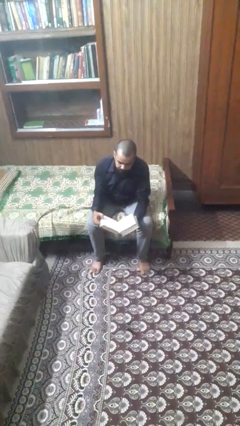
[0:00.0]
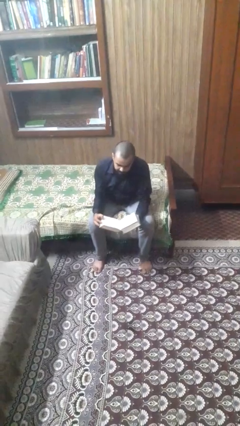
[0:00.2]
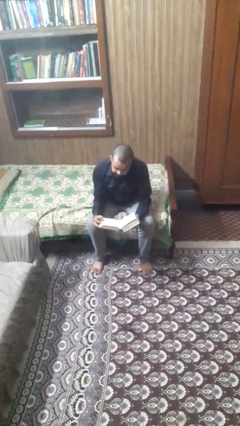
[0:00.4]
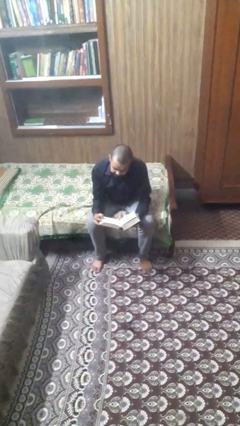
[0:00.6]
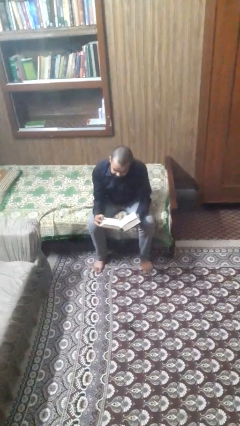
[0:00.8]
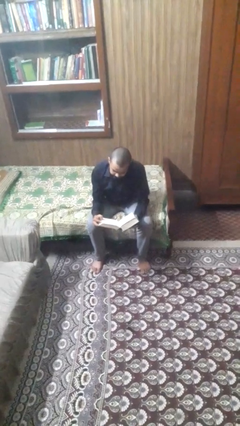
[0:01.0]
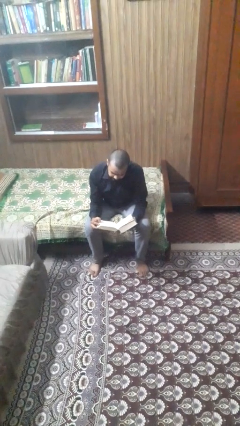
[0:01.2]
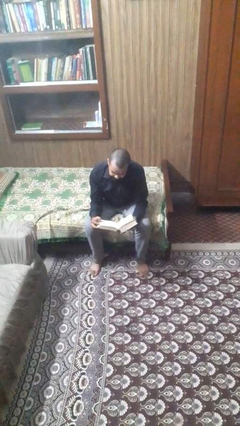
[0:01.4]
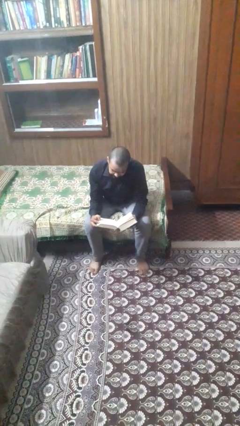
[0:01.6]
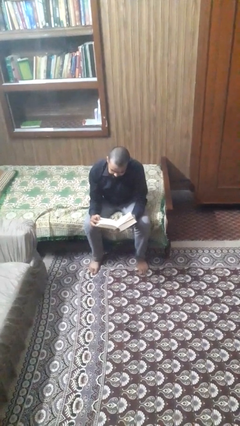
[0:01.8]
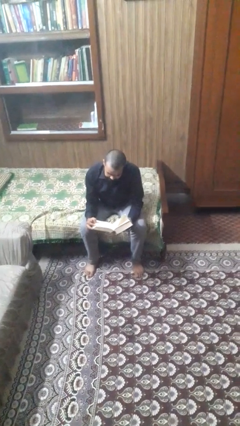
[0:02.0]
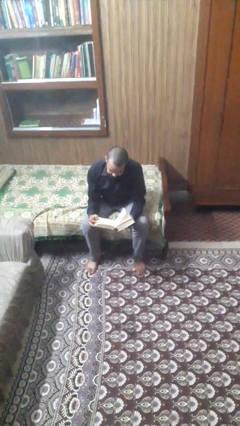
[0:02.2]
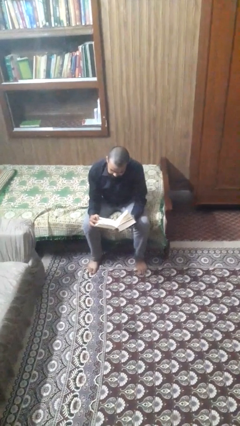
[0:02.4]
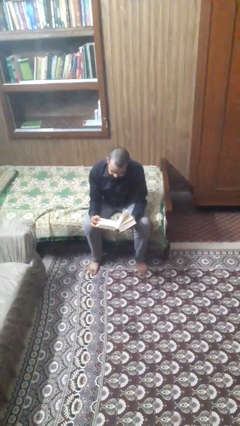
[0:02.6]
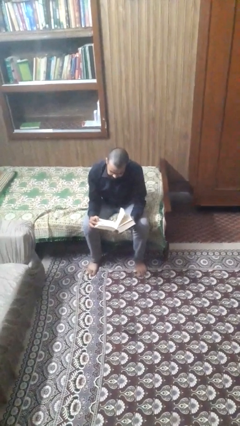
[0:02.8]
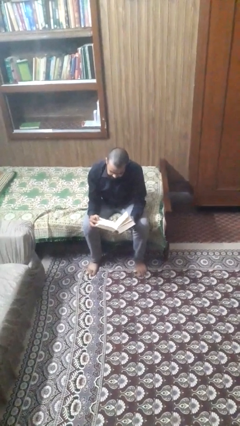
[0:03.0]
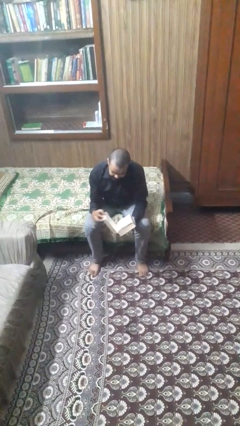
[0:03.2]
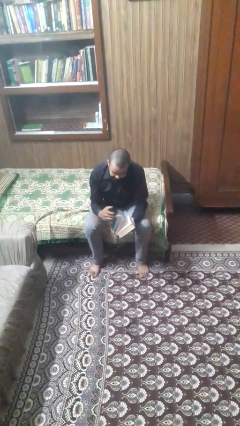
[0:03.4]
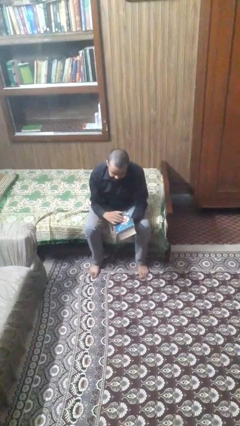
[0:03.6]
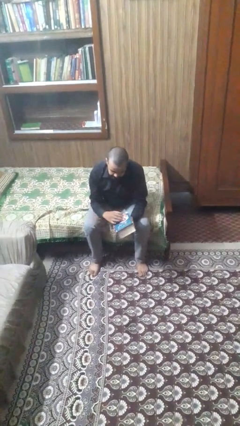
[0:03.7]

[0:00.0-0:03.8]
person reads book

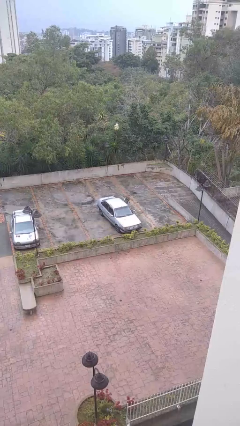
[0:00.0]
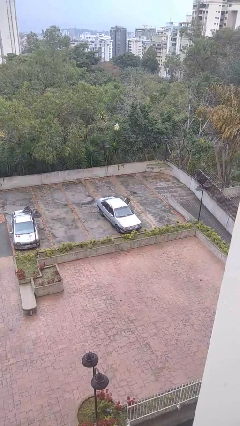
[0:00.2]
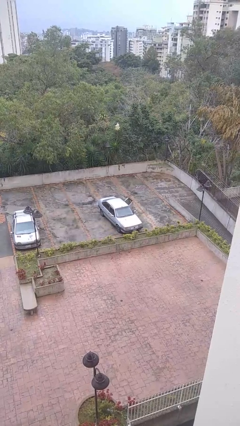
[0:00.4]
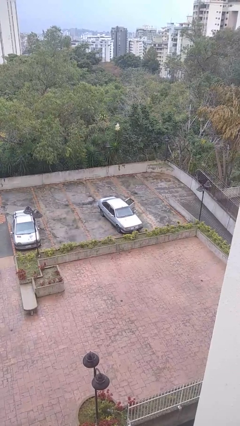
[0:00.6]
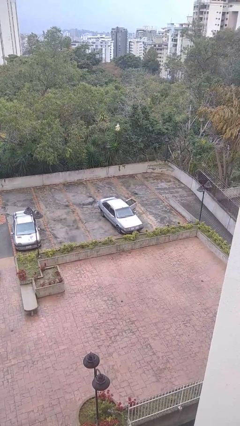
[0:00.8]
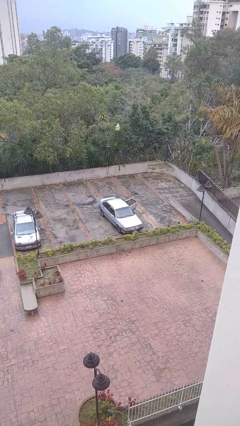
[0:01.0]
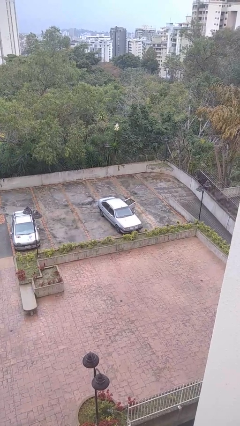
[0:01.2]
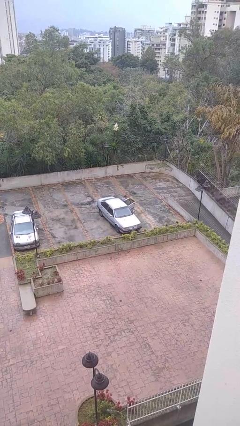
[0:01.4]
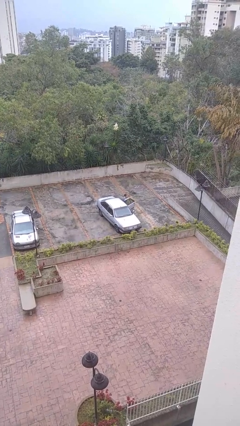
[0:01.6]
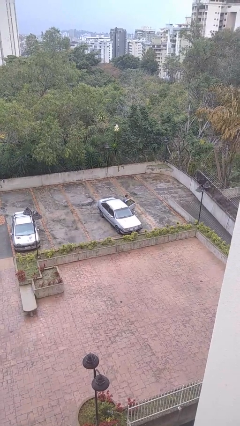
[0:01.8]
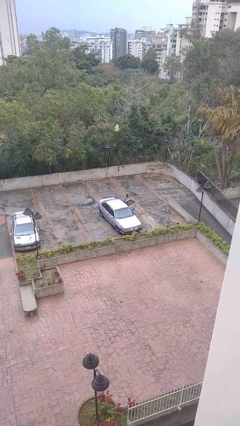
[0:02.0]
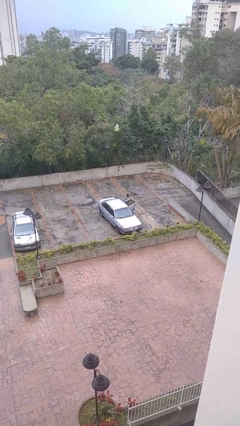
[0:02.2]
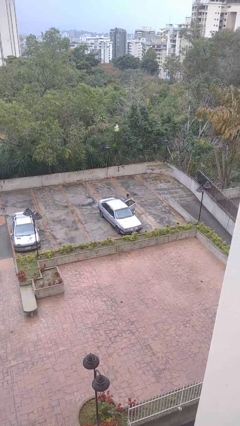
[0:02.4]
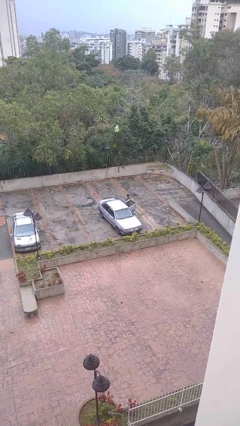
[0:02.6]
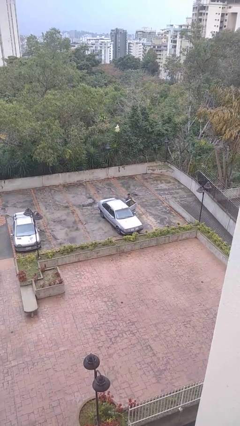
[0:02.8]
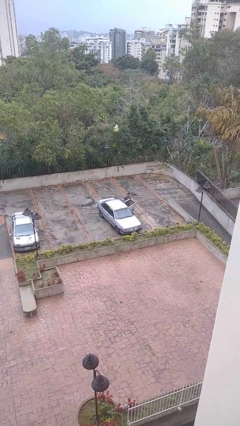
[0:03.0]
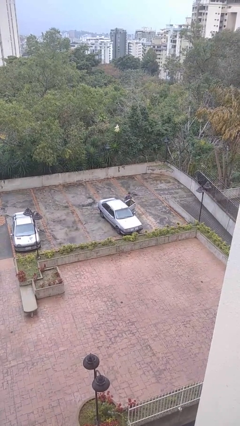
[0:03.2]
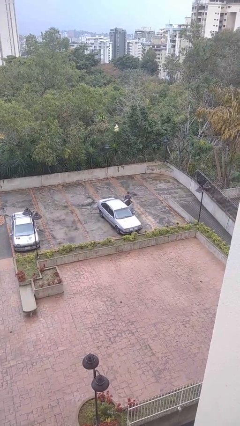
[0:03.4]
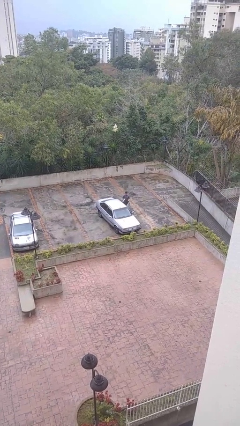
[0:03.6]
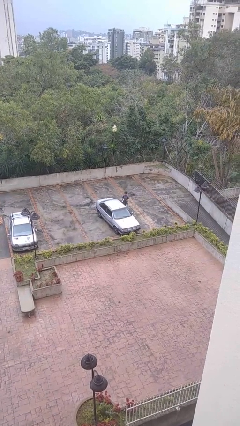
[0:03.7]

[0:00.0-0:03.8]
car drops off person

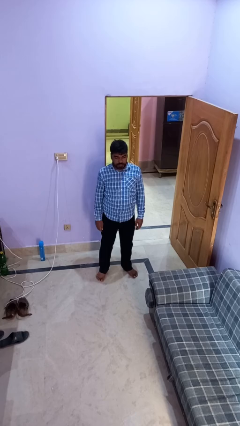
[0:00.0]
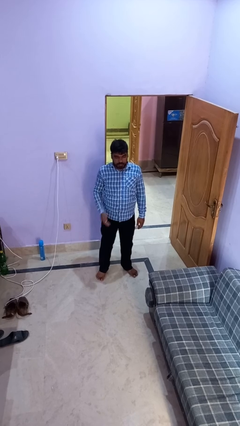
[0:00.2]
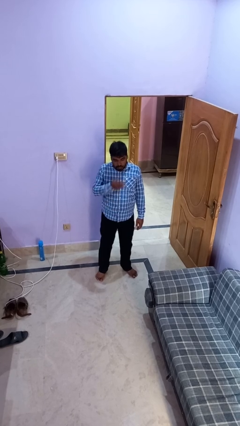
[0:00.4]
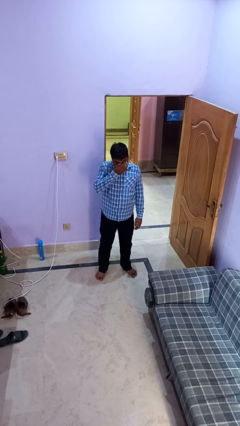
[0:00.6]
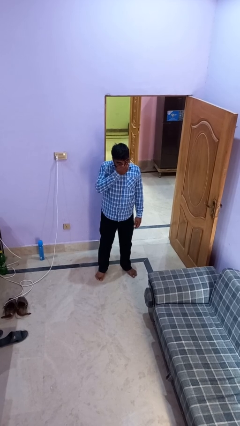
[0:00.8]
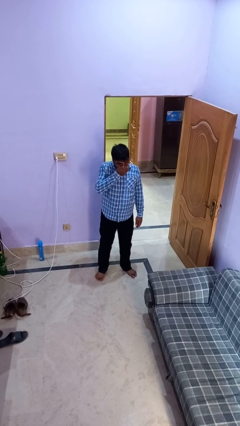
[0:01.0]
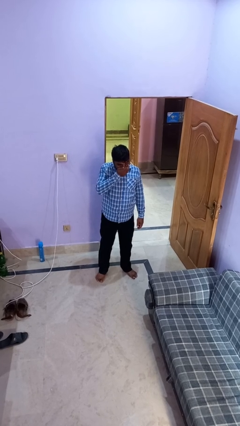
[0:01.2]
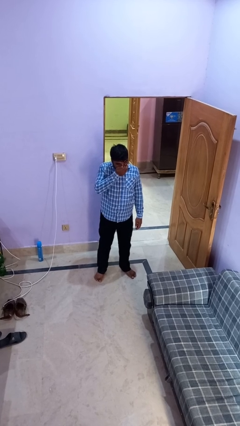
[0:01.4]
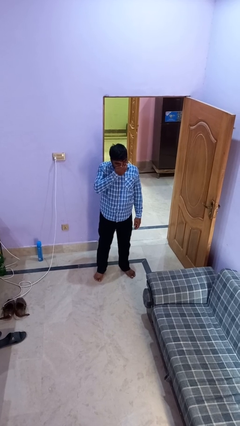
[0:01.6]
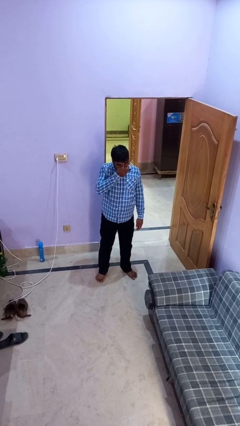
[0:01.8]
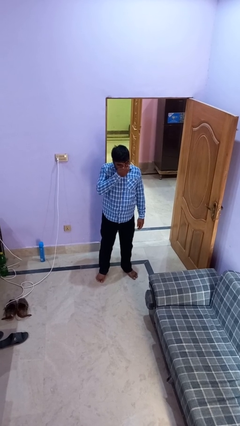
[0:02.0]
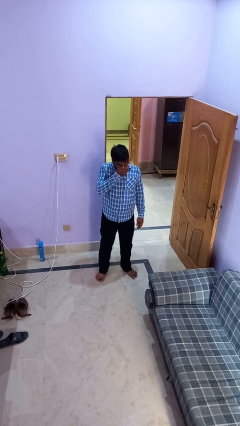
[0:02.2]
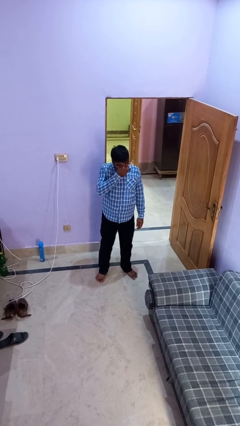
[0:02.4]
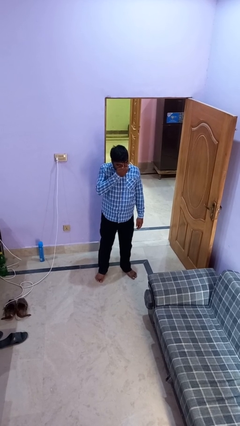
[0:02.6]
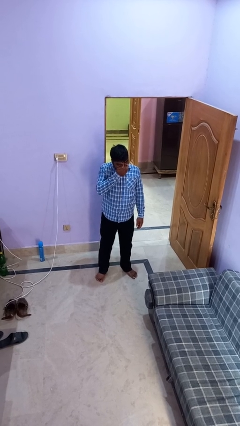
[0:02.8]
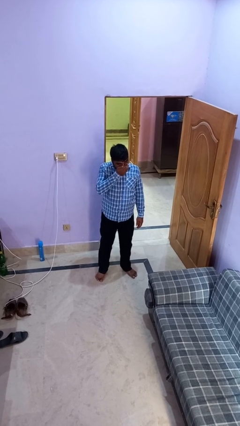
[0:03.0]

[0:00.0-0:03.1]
person sneezes into hand

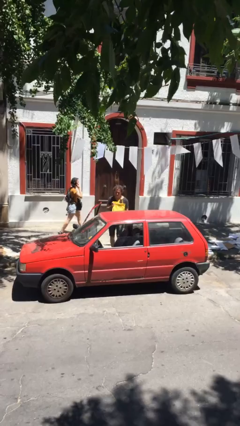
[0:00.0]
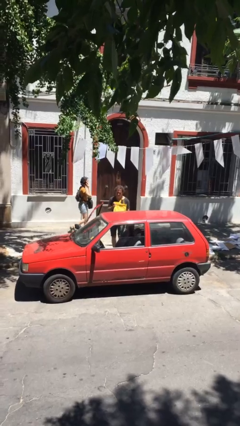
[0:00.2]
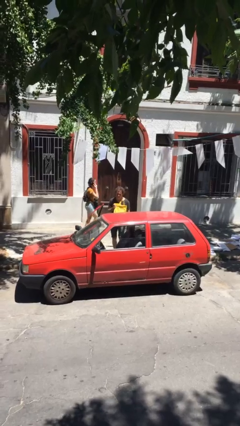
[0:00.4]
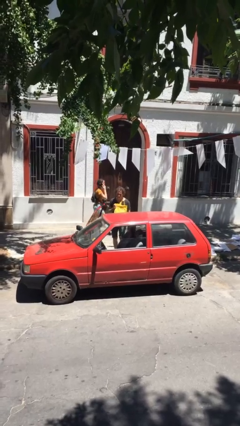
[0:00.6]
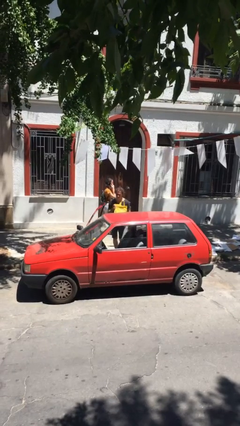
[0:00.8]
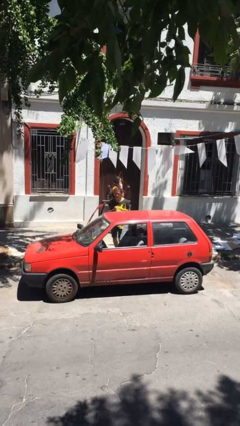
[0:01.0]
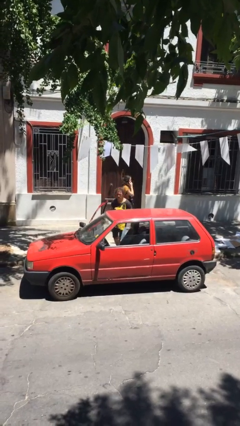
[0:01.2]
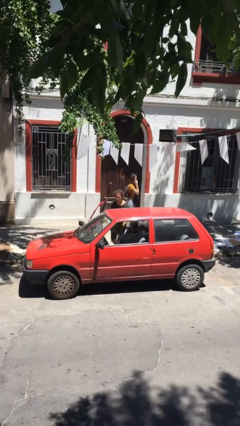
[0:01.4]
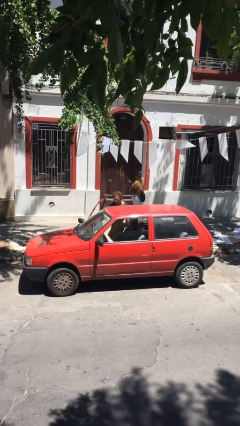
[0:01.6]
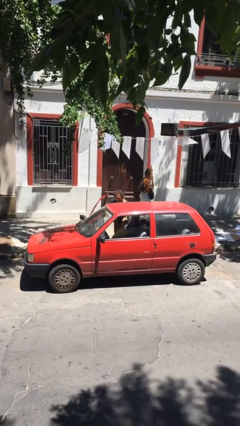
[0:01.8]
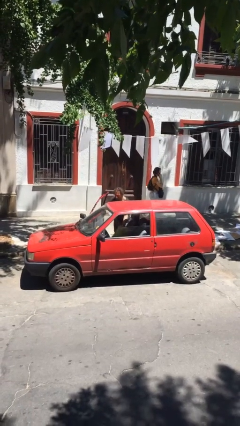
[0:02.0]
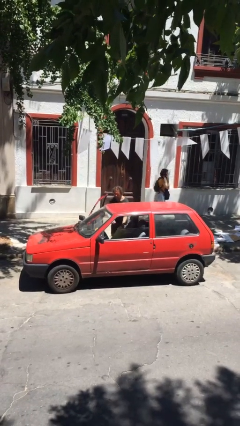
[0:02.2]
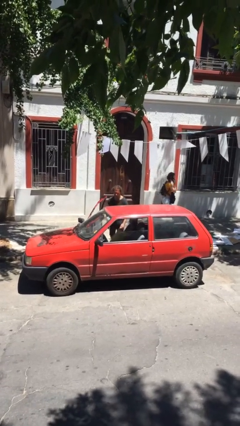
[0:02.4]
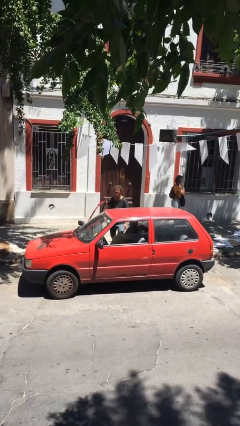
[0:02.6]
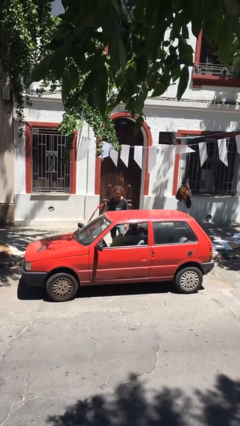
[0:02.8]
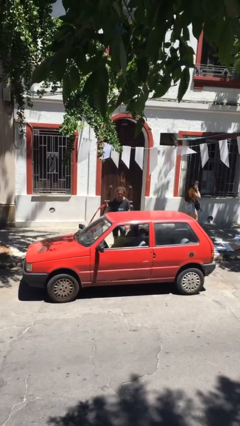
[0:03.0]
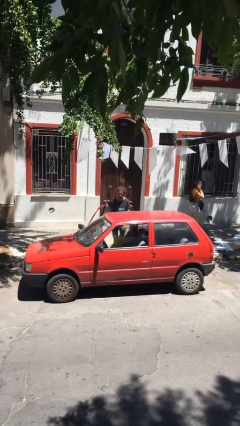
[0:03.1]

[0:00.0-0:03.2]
person loads car

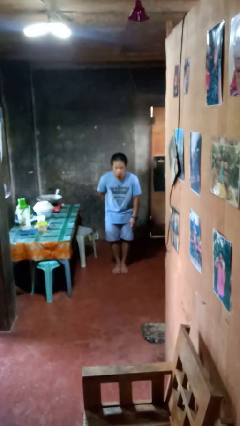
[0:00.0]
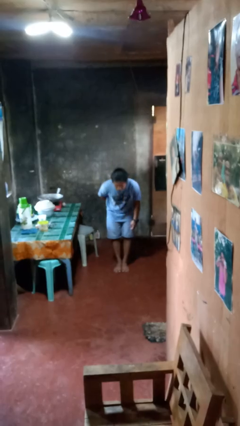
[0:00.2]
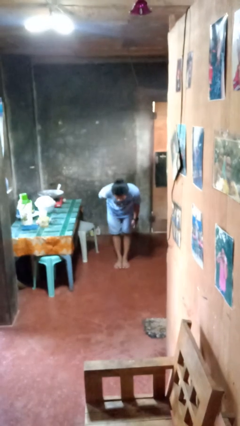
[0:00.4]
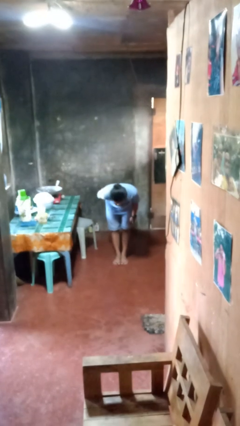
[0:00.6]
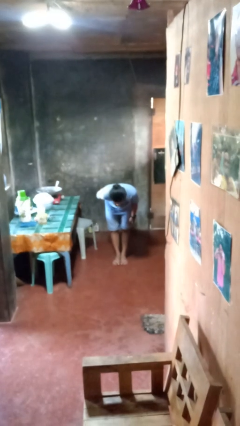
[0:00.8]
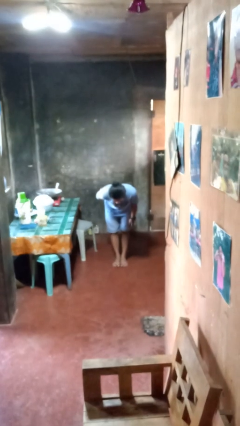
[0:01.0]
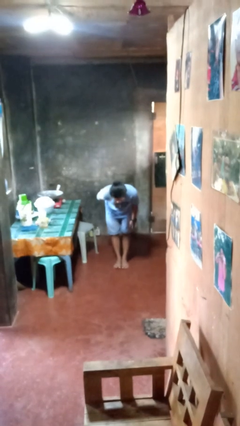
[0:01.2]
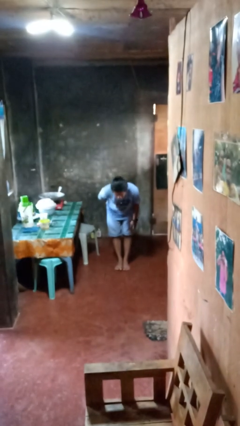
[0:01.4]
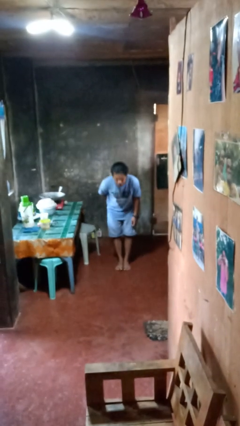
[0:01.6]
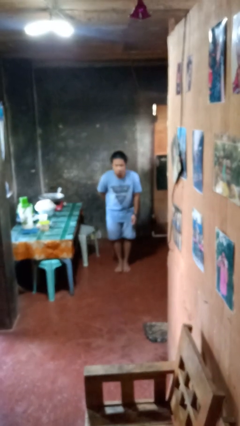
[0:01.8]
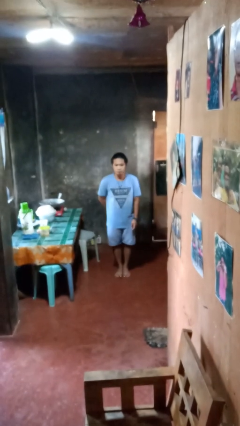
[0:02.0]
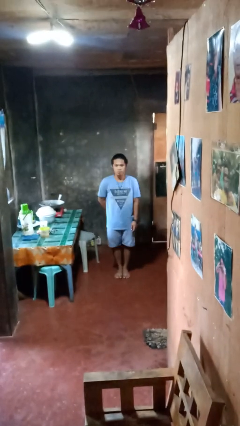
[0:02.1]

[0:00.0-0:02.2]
person bows

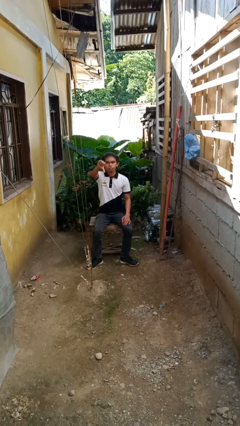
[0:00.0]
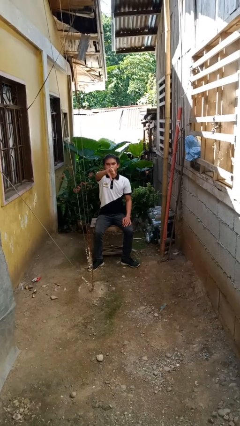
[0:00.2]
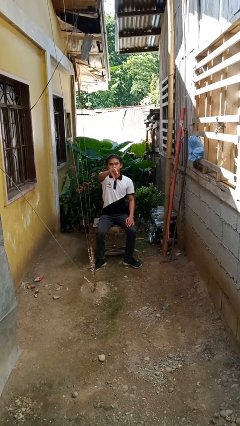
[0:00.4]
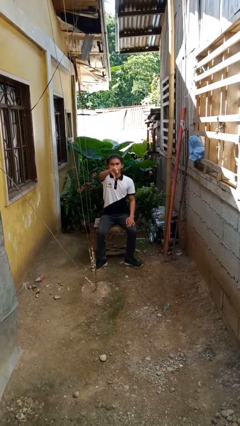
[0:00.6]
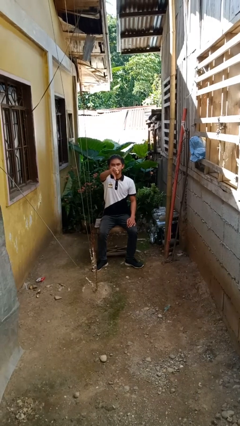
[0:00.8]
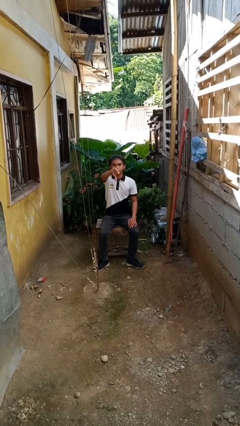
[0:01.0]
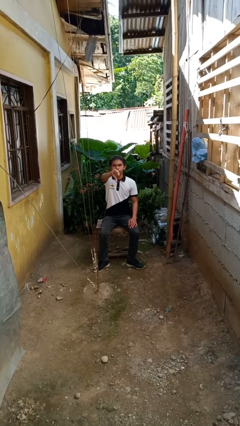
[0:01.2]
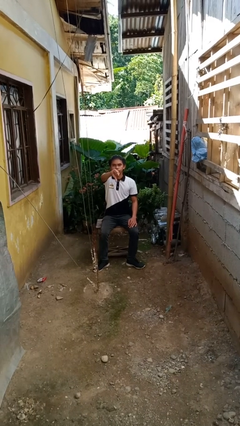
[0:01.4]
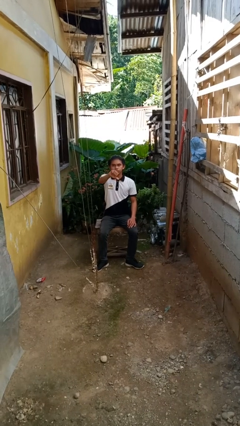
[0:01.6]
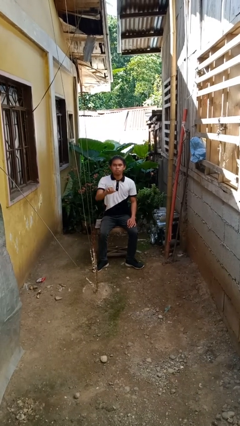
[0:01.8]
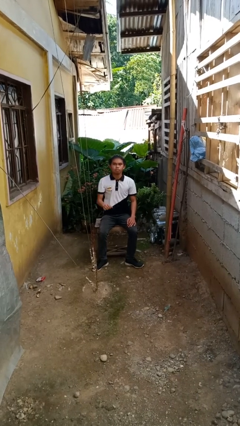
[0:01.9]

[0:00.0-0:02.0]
person gestures thumbs down

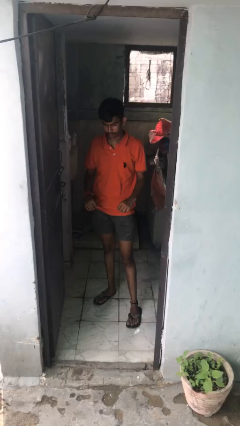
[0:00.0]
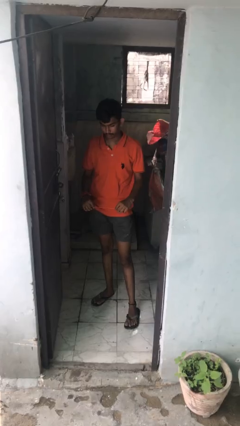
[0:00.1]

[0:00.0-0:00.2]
person flosses
